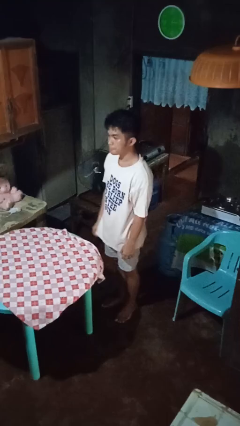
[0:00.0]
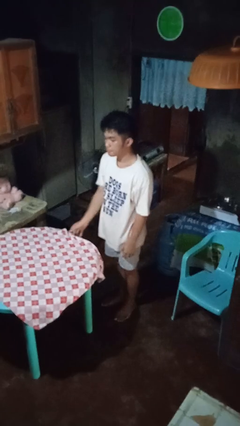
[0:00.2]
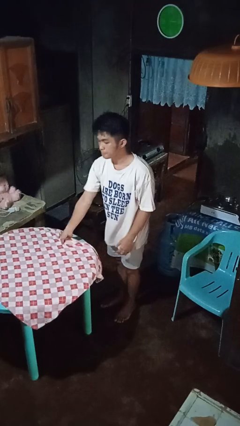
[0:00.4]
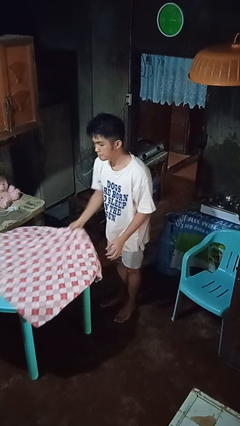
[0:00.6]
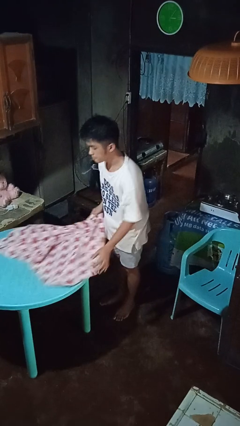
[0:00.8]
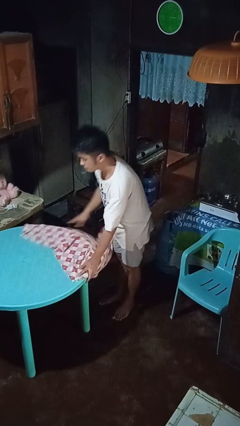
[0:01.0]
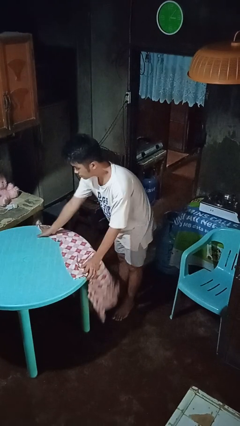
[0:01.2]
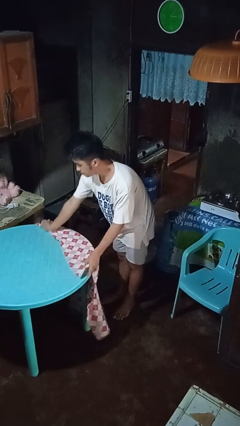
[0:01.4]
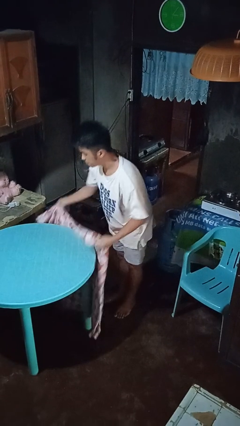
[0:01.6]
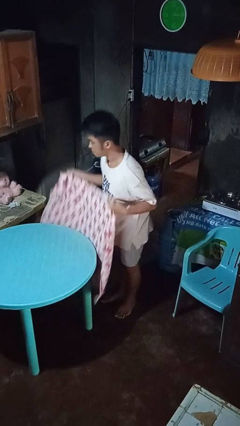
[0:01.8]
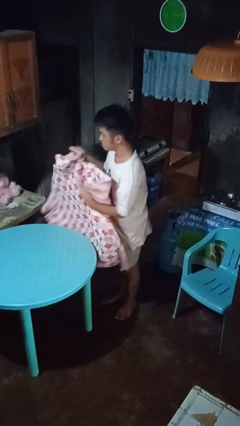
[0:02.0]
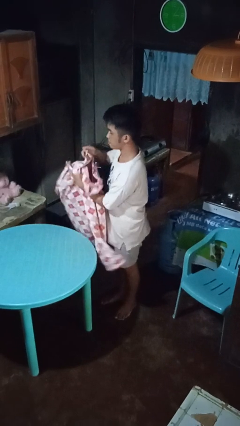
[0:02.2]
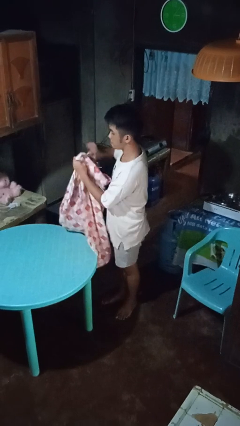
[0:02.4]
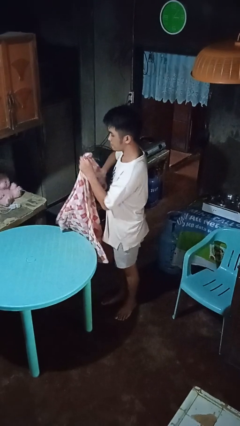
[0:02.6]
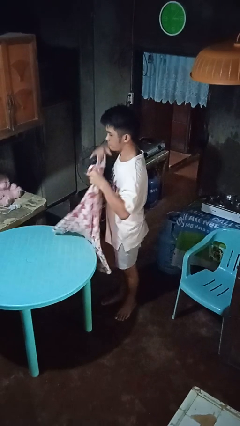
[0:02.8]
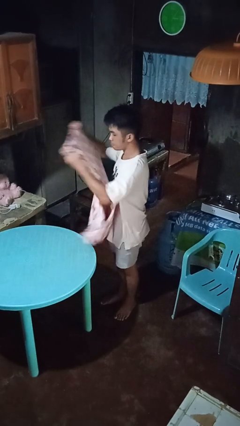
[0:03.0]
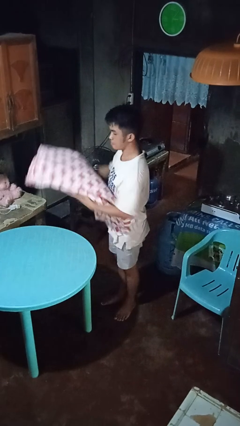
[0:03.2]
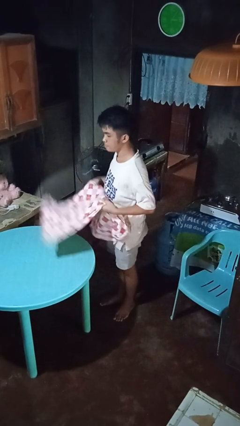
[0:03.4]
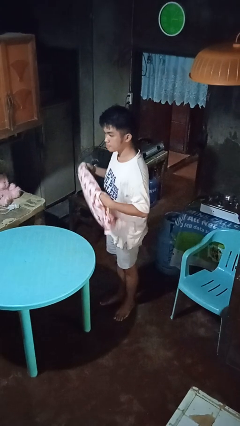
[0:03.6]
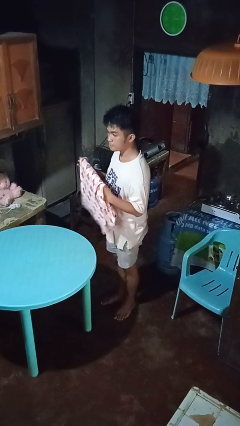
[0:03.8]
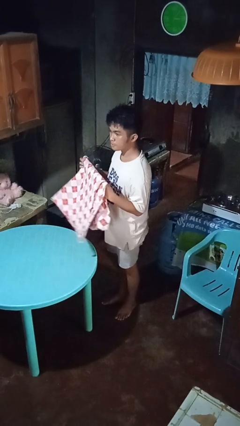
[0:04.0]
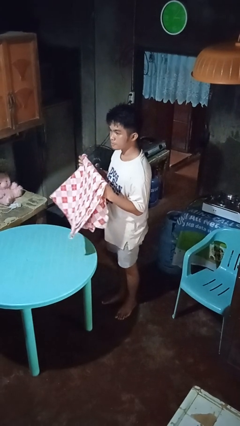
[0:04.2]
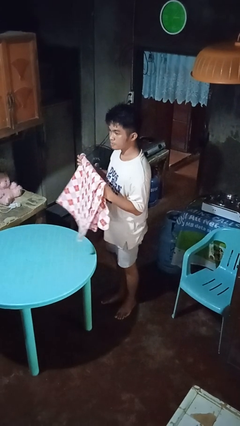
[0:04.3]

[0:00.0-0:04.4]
person folds tablecloth

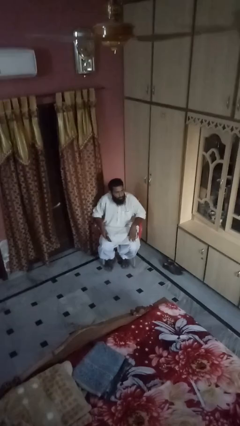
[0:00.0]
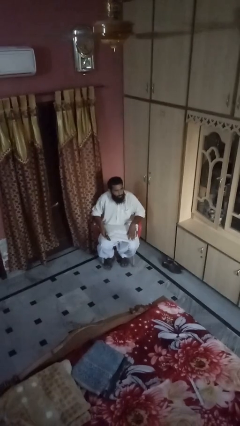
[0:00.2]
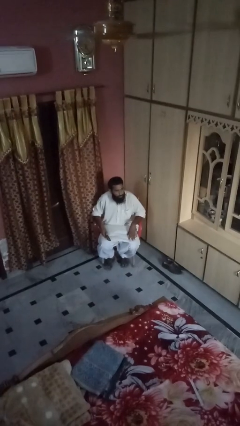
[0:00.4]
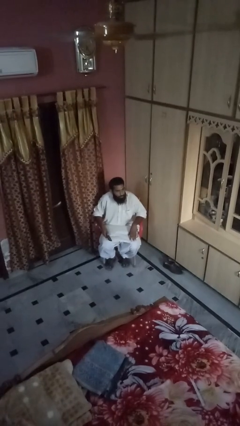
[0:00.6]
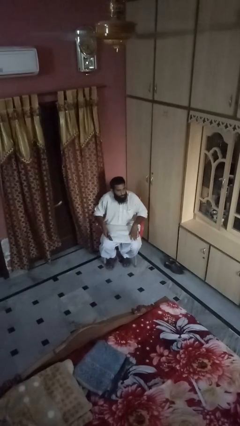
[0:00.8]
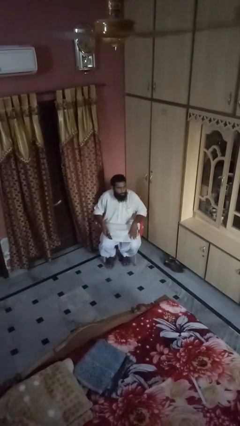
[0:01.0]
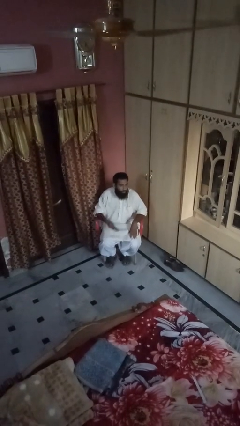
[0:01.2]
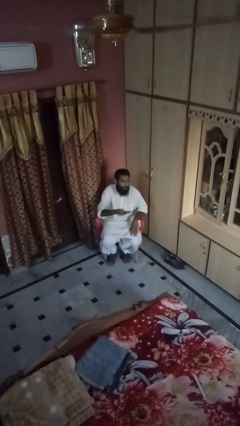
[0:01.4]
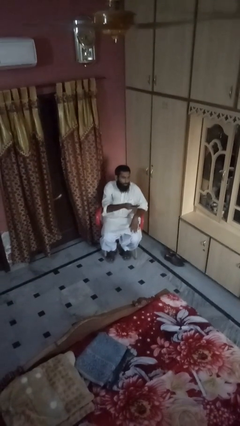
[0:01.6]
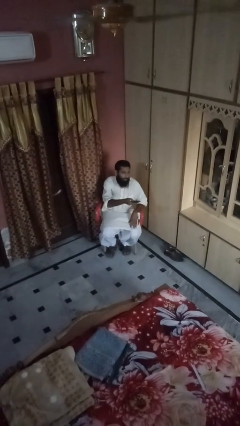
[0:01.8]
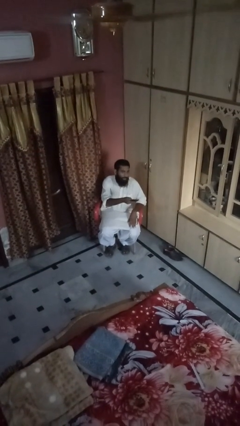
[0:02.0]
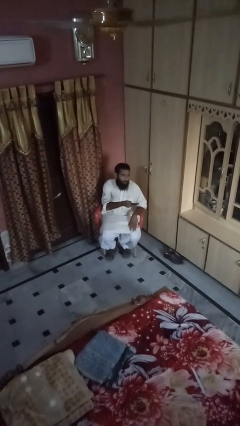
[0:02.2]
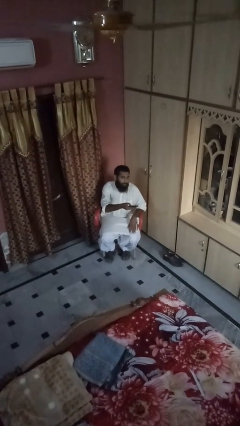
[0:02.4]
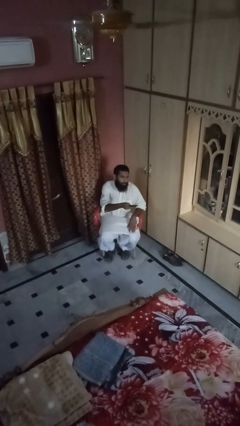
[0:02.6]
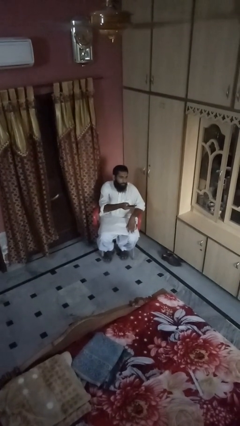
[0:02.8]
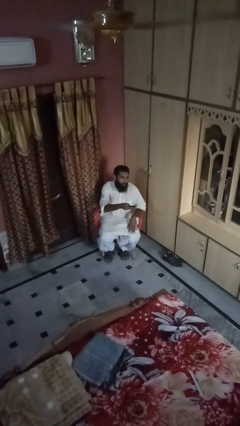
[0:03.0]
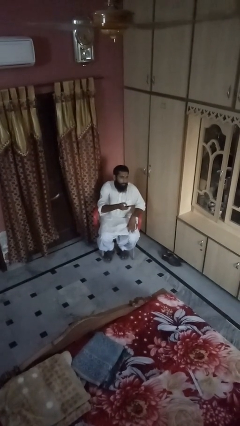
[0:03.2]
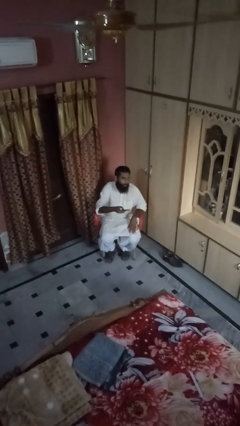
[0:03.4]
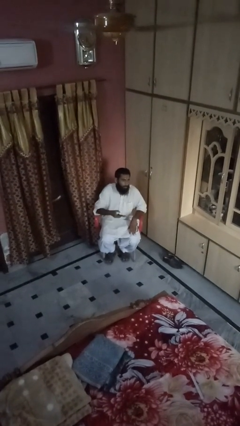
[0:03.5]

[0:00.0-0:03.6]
person uses television remote

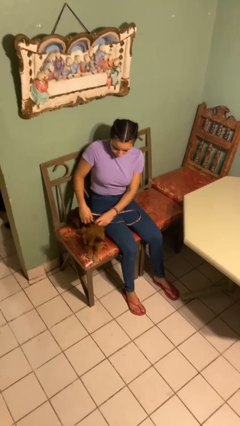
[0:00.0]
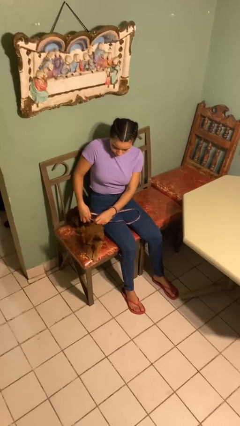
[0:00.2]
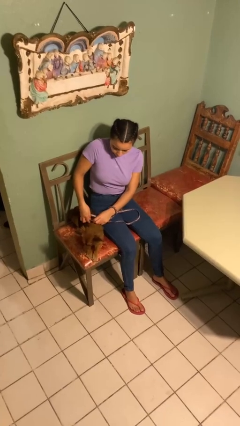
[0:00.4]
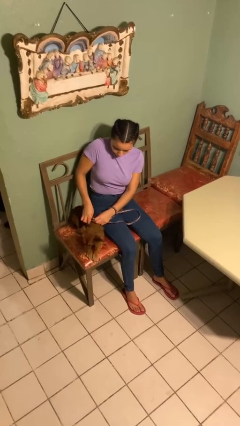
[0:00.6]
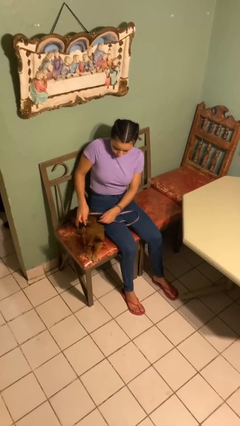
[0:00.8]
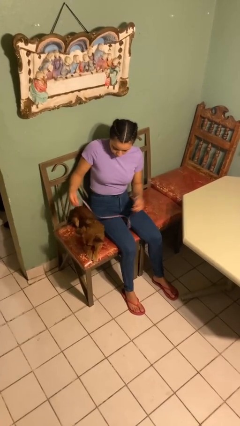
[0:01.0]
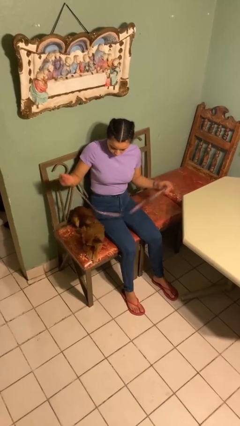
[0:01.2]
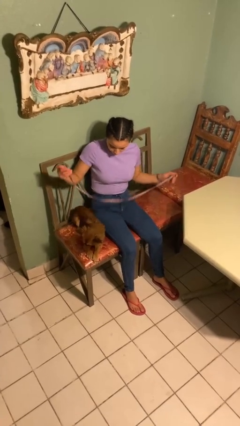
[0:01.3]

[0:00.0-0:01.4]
person unattaches leash from dog

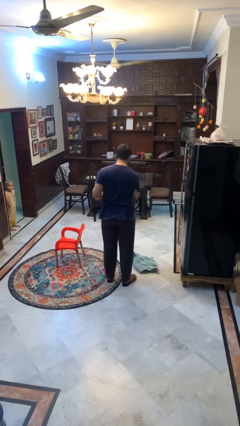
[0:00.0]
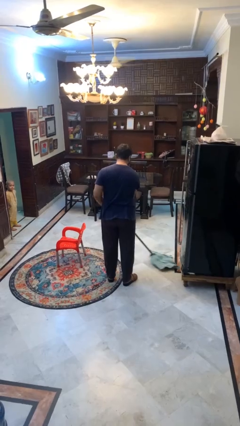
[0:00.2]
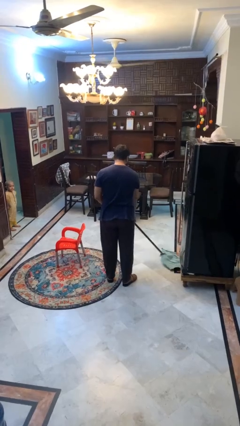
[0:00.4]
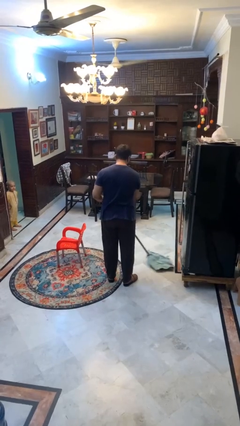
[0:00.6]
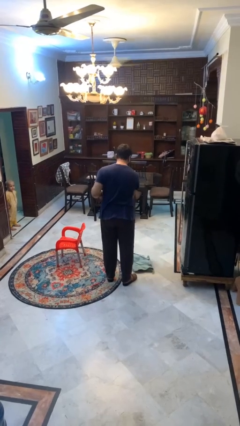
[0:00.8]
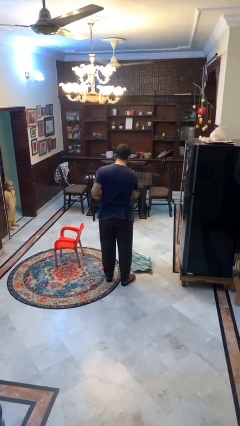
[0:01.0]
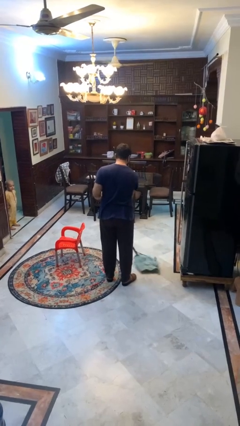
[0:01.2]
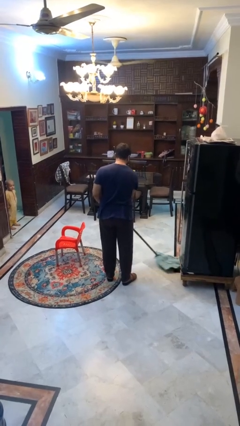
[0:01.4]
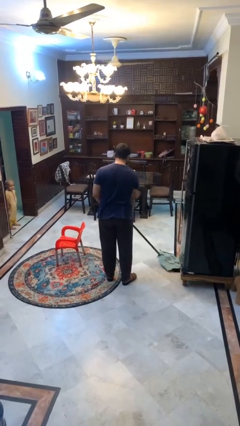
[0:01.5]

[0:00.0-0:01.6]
person mops

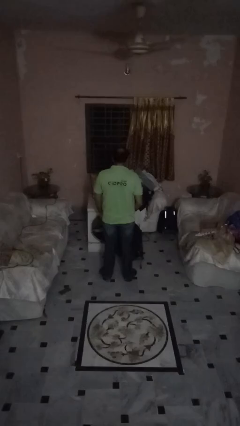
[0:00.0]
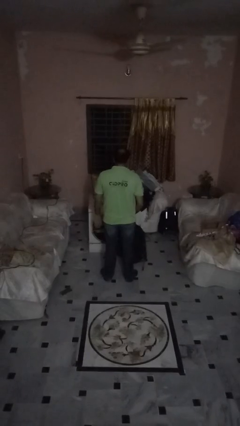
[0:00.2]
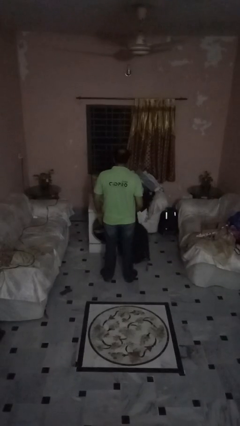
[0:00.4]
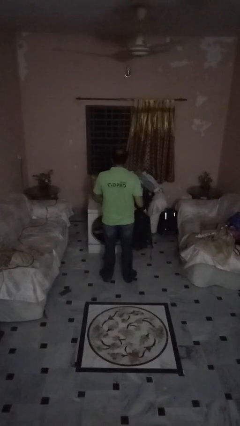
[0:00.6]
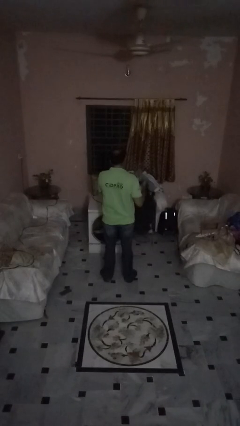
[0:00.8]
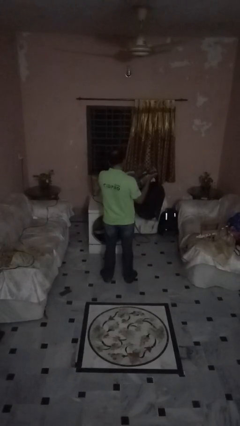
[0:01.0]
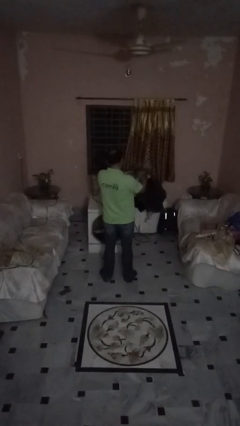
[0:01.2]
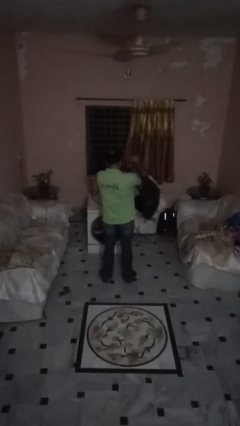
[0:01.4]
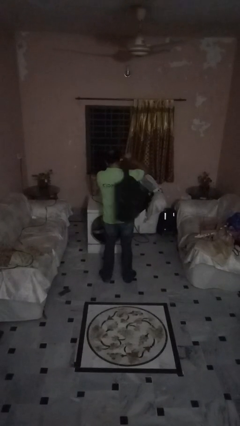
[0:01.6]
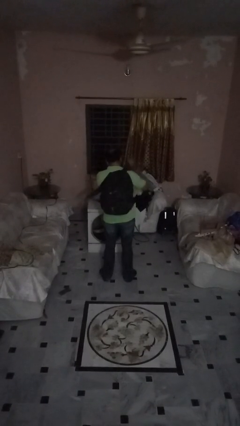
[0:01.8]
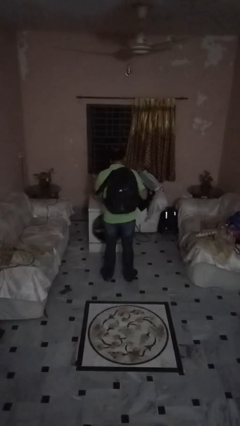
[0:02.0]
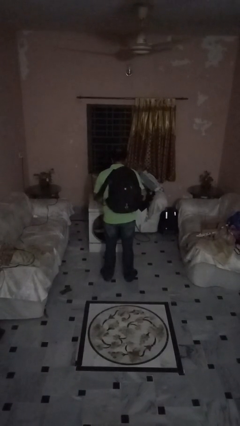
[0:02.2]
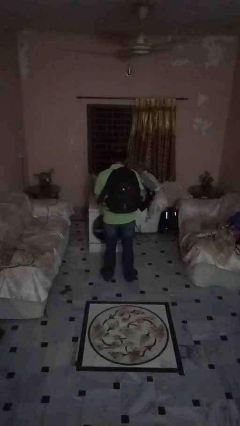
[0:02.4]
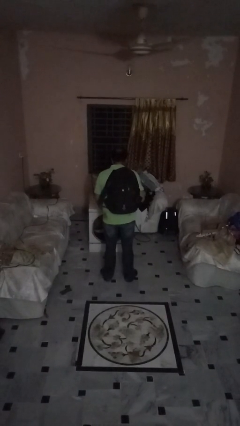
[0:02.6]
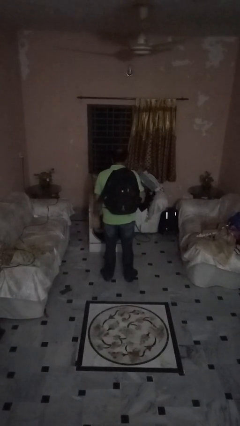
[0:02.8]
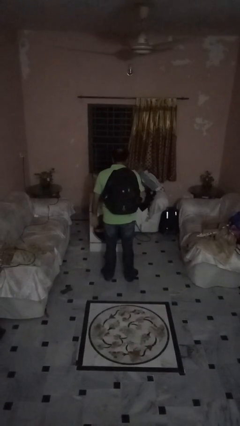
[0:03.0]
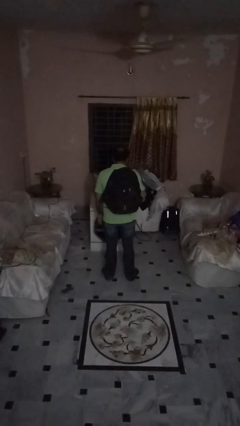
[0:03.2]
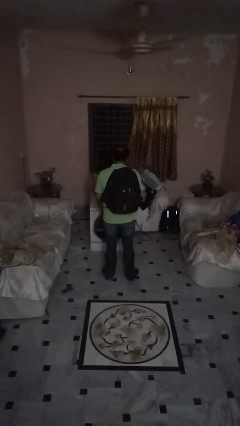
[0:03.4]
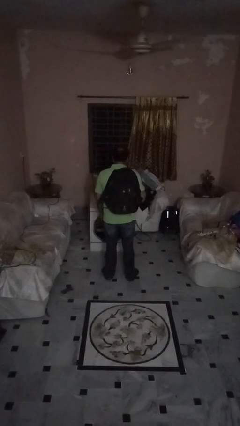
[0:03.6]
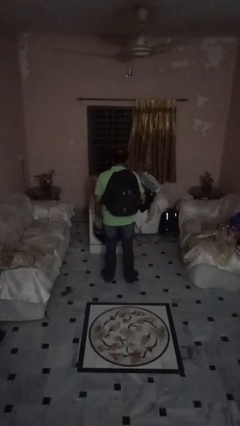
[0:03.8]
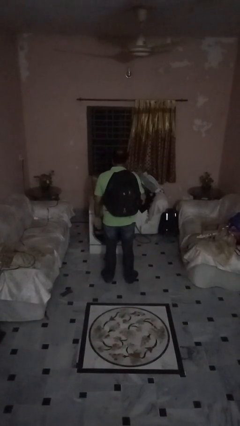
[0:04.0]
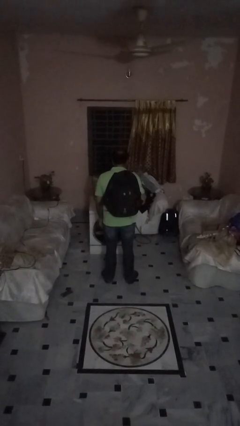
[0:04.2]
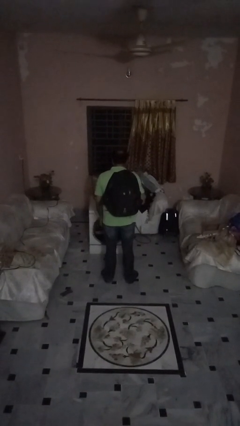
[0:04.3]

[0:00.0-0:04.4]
person puts on backpack

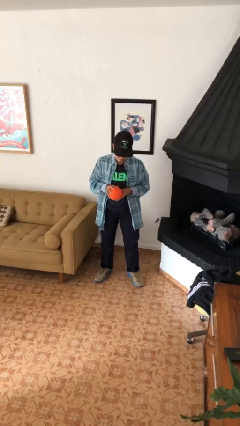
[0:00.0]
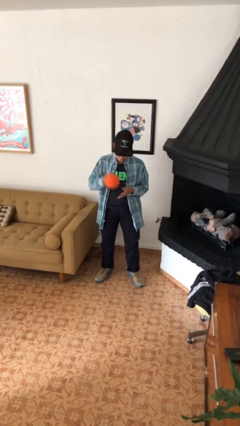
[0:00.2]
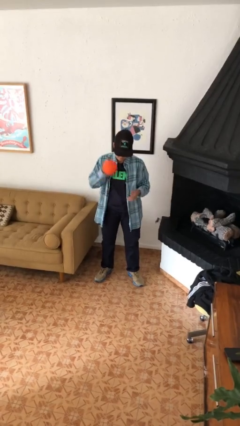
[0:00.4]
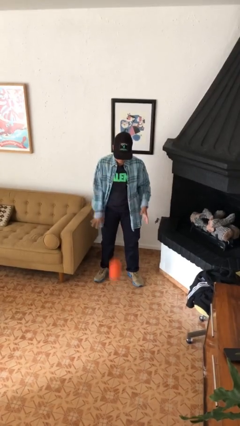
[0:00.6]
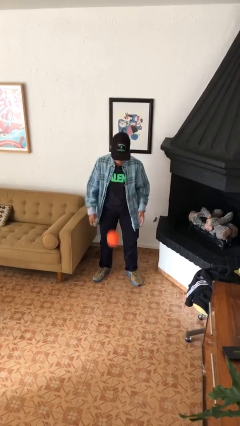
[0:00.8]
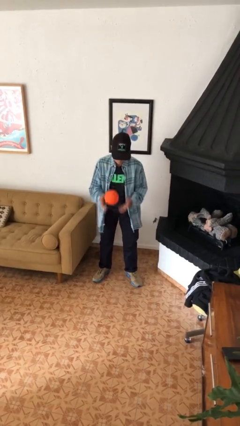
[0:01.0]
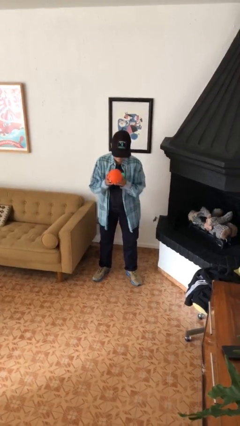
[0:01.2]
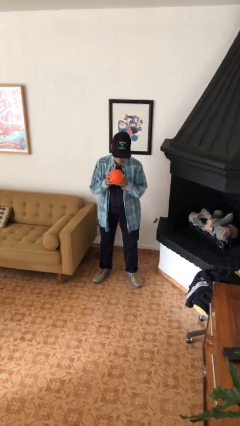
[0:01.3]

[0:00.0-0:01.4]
person bounces ball on floor

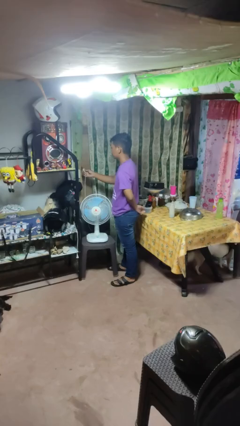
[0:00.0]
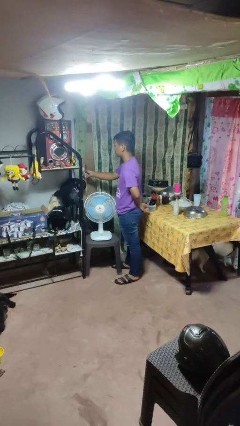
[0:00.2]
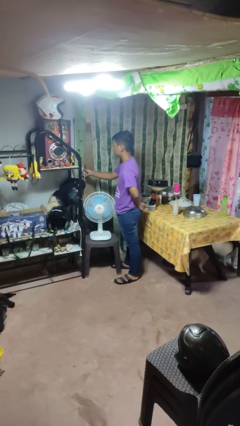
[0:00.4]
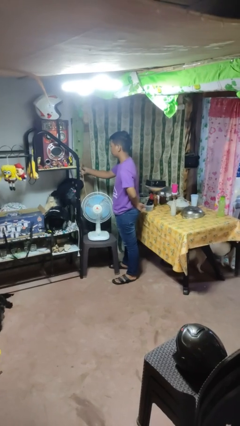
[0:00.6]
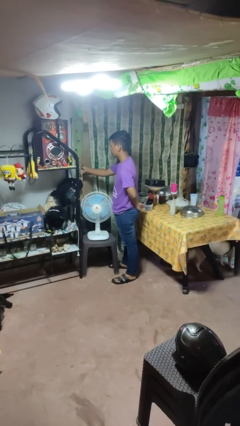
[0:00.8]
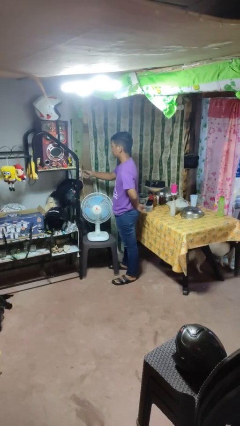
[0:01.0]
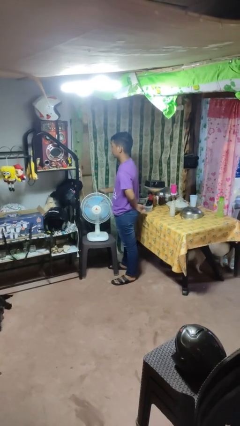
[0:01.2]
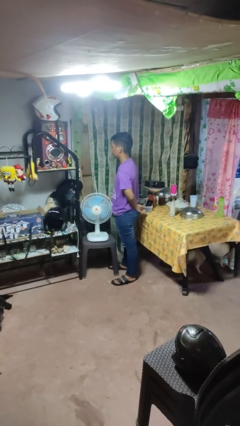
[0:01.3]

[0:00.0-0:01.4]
person plugs into electrical socket
